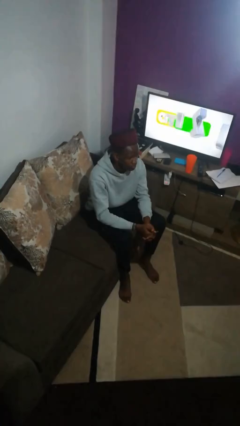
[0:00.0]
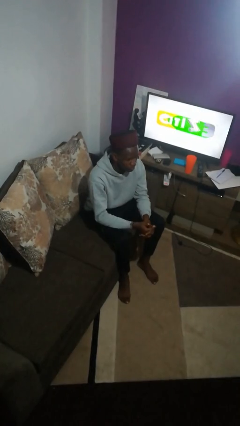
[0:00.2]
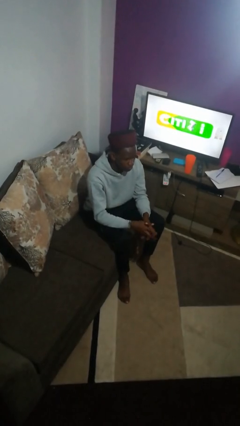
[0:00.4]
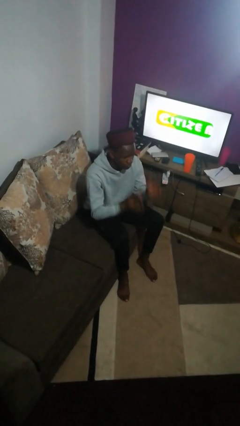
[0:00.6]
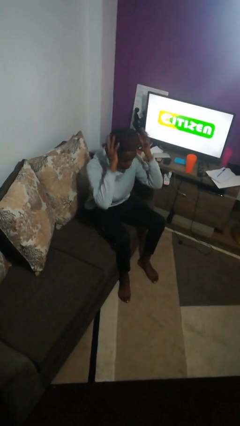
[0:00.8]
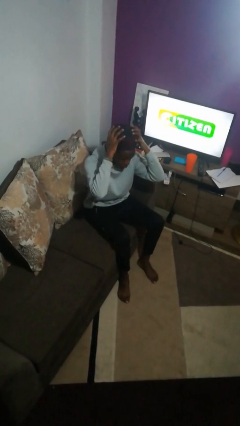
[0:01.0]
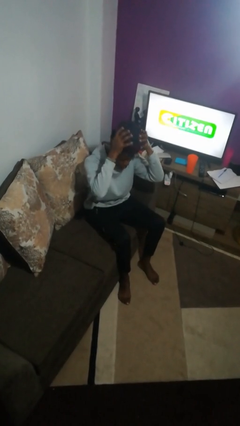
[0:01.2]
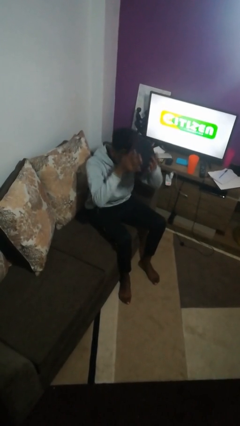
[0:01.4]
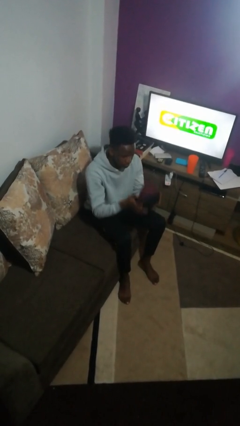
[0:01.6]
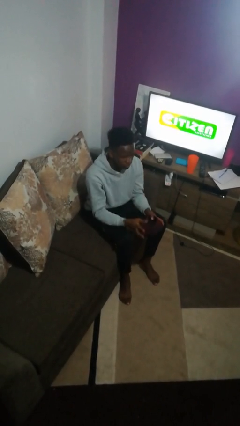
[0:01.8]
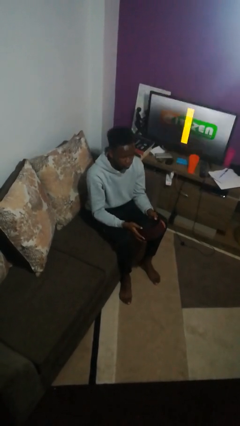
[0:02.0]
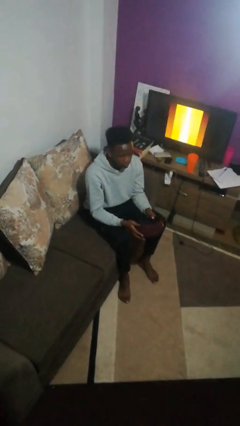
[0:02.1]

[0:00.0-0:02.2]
person takes off hat

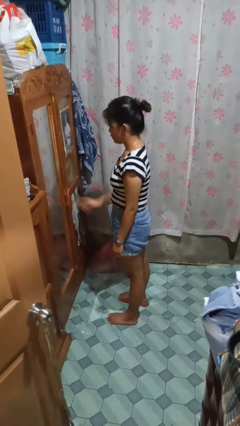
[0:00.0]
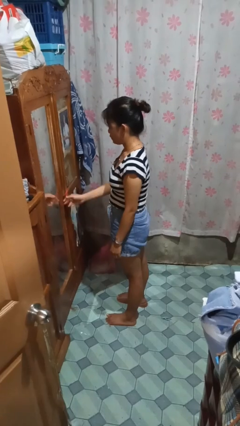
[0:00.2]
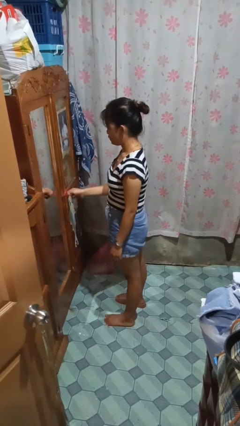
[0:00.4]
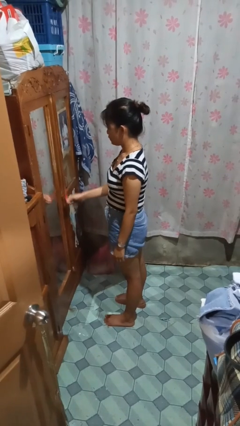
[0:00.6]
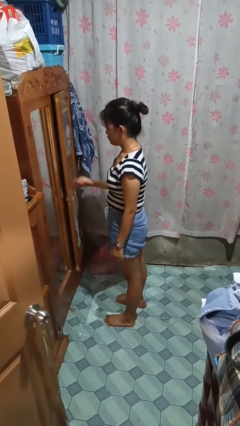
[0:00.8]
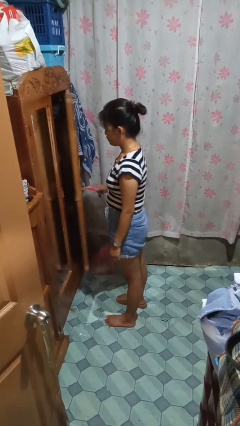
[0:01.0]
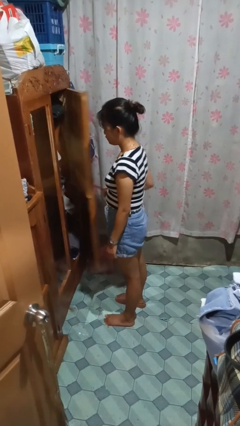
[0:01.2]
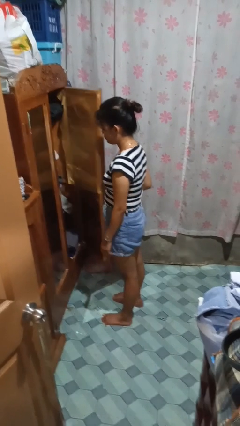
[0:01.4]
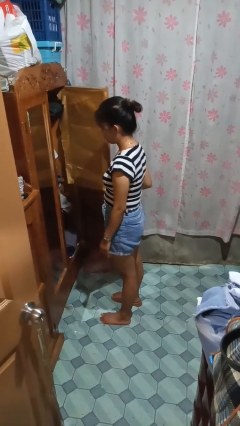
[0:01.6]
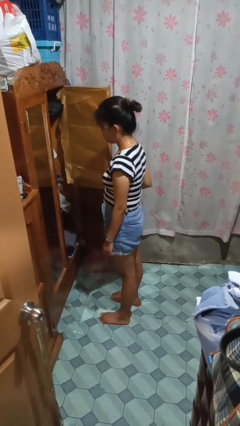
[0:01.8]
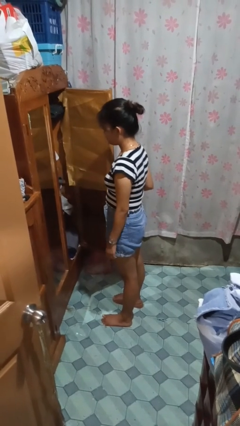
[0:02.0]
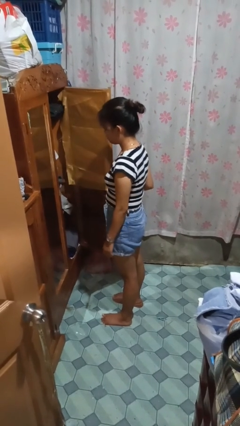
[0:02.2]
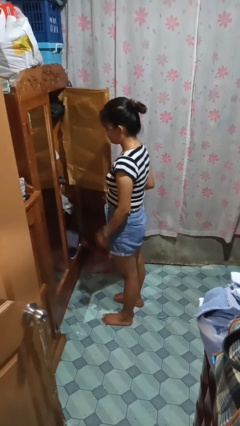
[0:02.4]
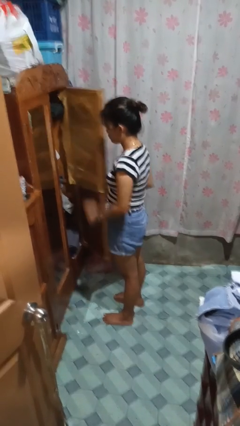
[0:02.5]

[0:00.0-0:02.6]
person opens closet door

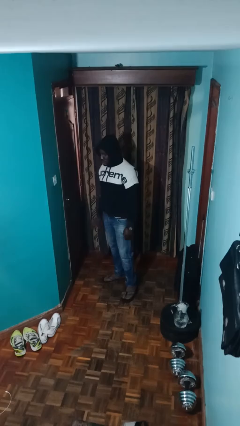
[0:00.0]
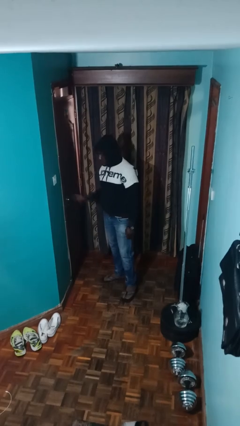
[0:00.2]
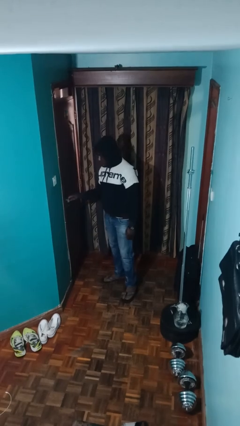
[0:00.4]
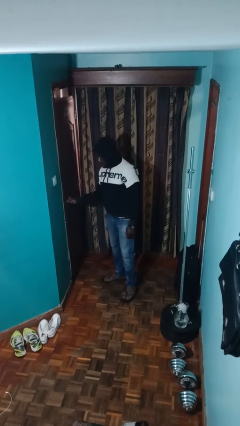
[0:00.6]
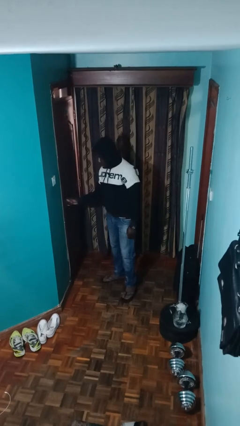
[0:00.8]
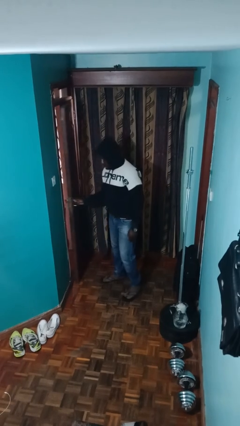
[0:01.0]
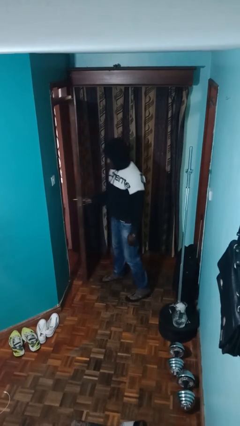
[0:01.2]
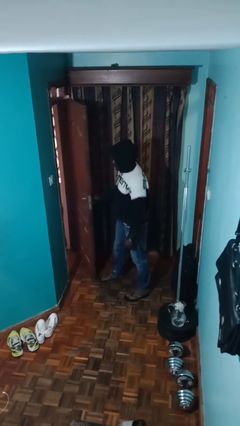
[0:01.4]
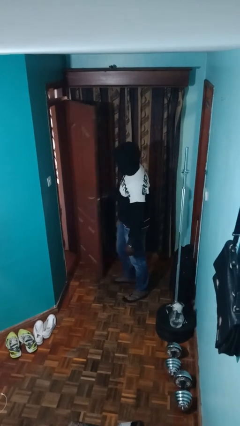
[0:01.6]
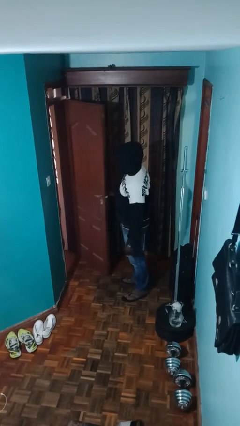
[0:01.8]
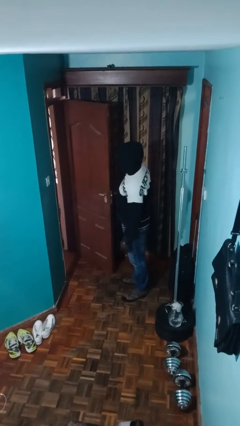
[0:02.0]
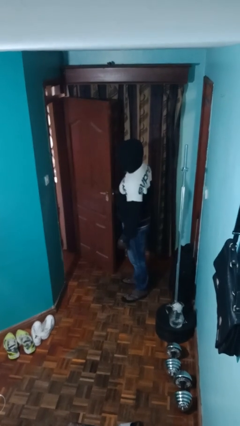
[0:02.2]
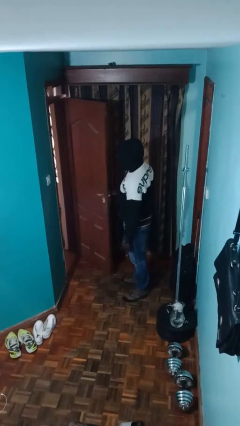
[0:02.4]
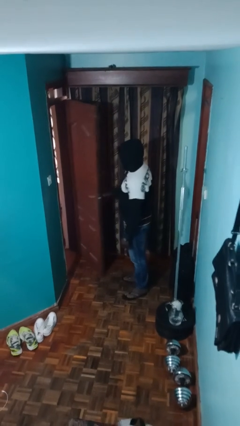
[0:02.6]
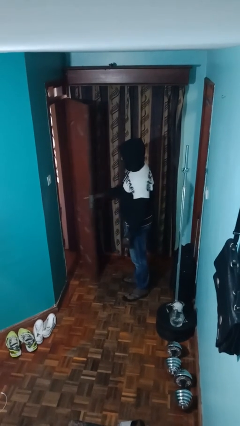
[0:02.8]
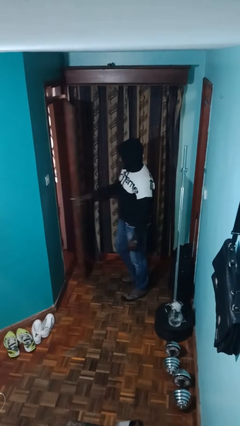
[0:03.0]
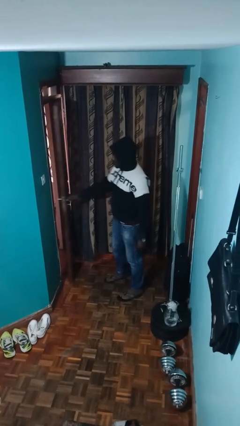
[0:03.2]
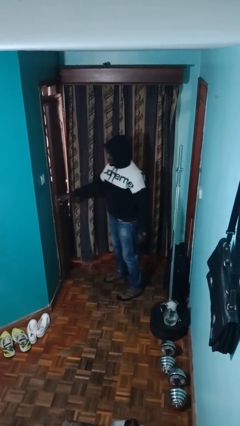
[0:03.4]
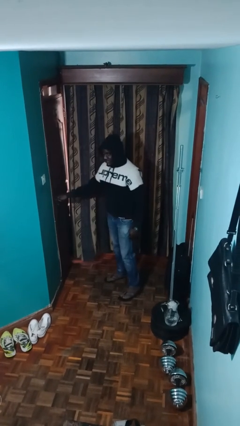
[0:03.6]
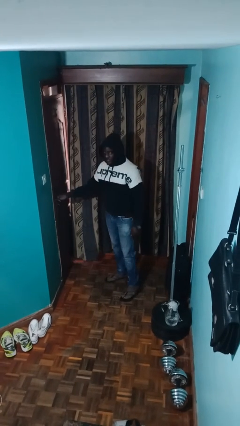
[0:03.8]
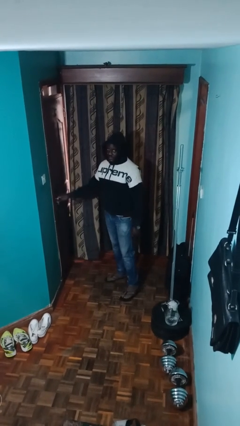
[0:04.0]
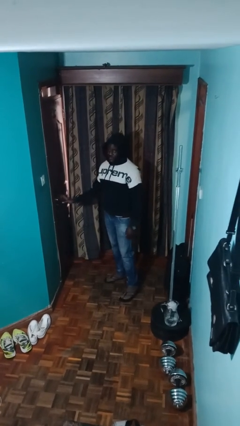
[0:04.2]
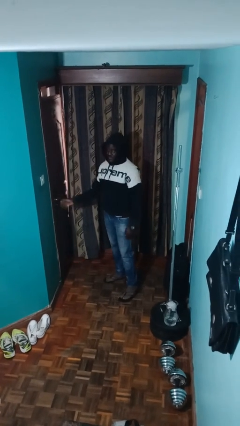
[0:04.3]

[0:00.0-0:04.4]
person unlocks door with keys

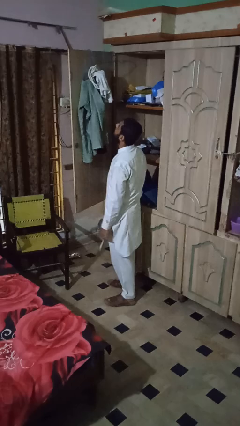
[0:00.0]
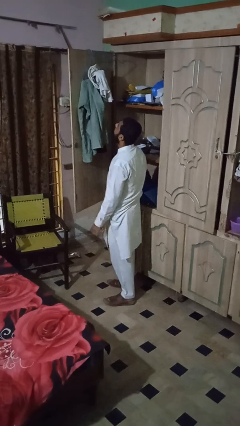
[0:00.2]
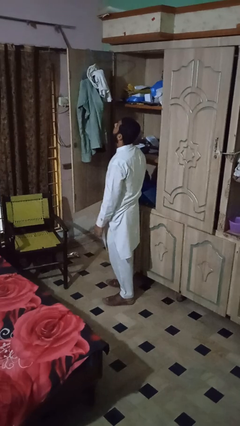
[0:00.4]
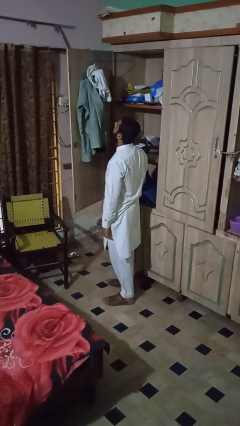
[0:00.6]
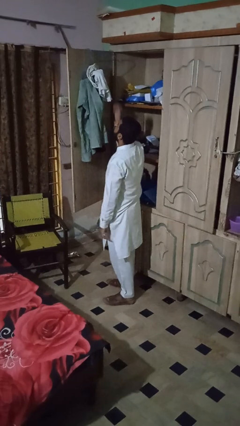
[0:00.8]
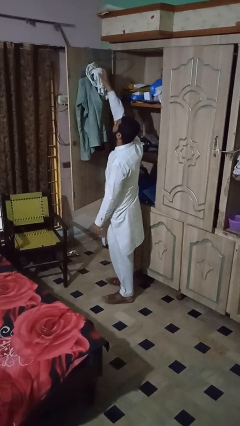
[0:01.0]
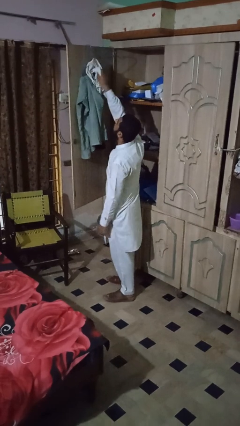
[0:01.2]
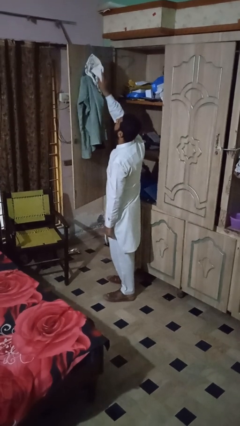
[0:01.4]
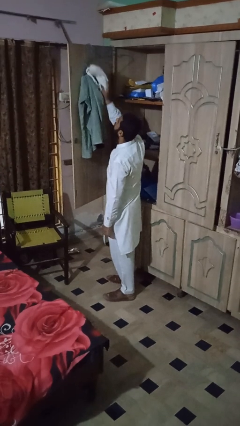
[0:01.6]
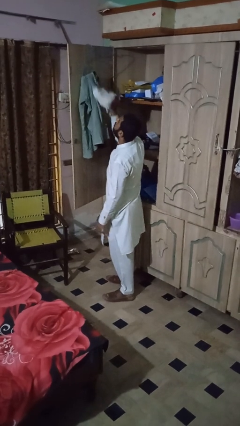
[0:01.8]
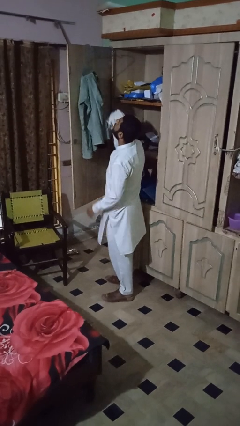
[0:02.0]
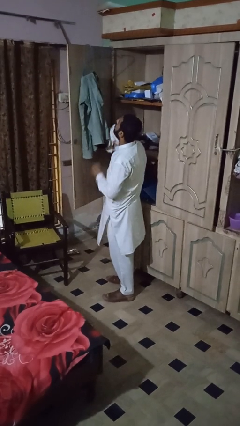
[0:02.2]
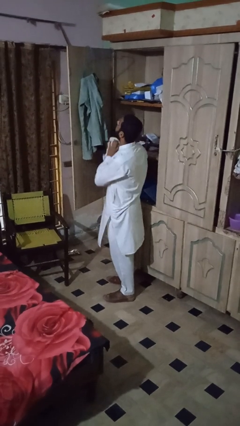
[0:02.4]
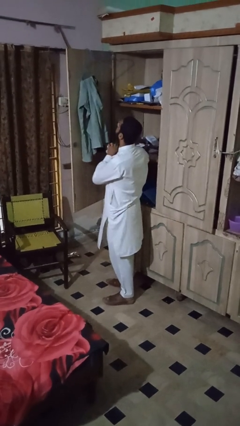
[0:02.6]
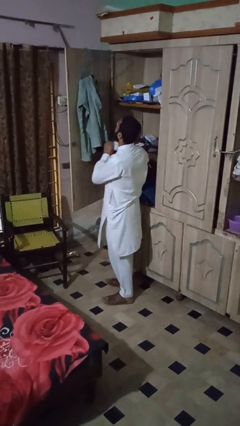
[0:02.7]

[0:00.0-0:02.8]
person takes clothes from closet

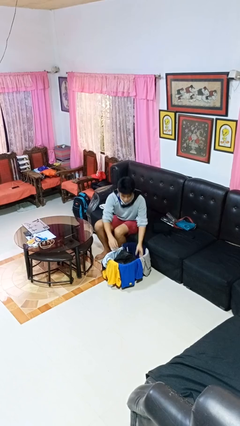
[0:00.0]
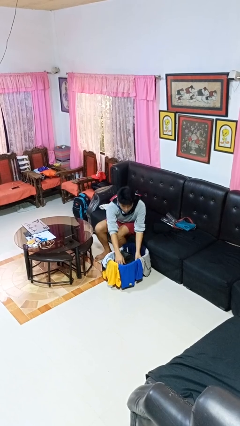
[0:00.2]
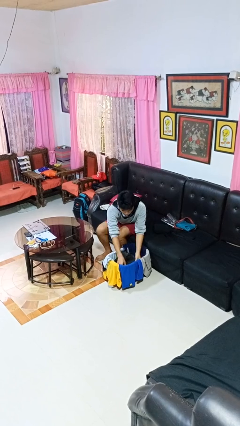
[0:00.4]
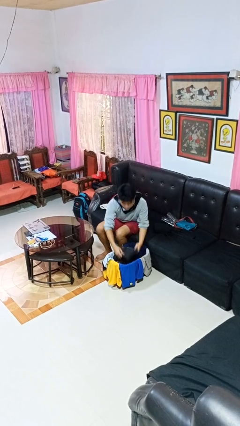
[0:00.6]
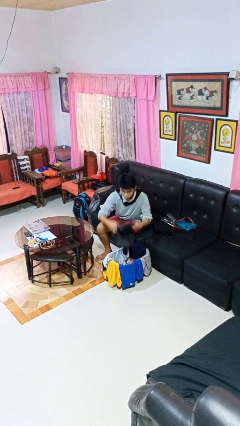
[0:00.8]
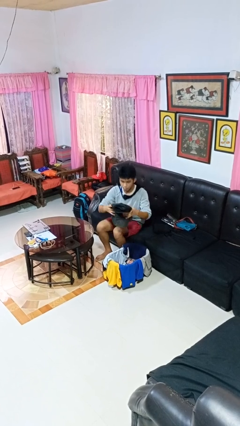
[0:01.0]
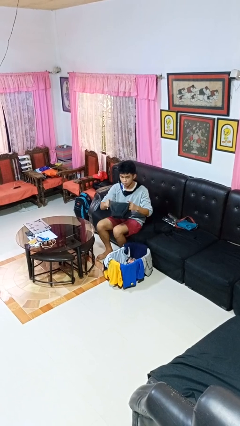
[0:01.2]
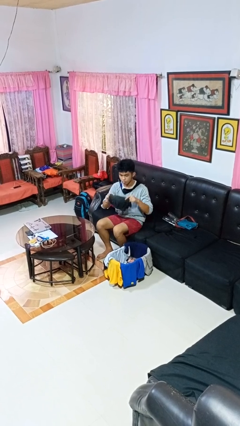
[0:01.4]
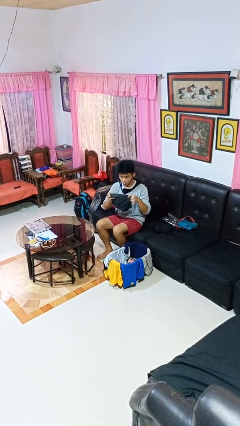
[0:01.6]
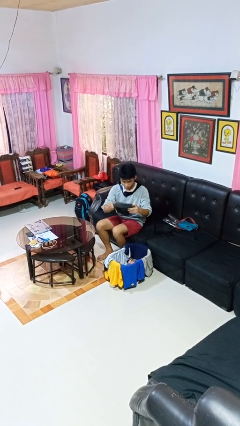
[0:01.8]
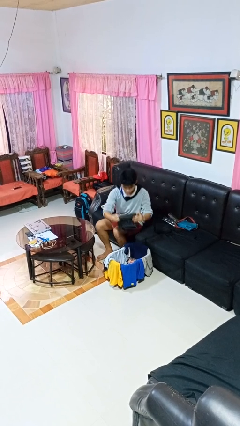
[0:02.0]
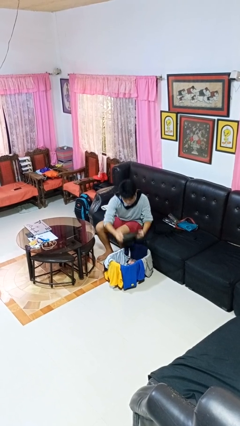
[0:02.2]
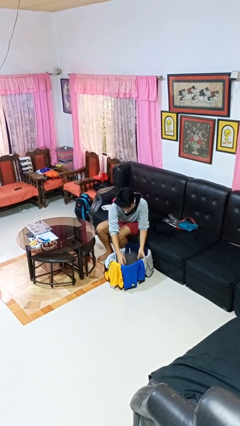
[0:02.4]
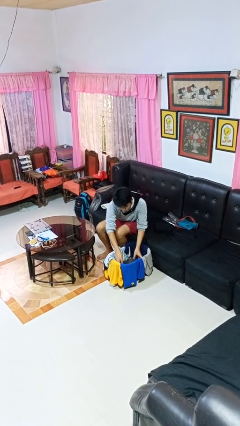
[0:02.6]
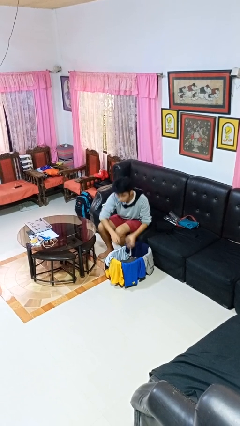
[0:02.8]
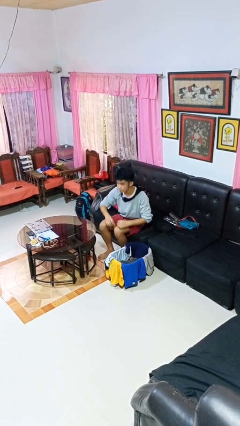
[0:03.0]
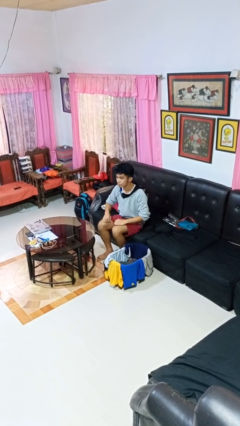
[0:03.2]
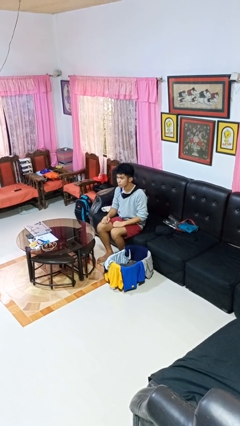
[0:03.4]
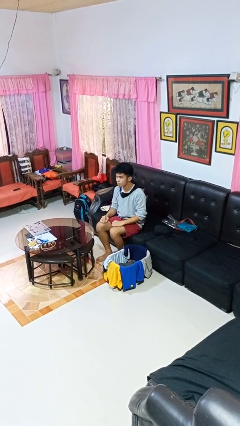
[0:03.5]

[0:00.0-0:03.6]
person folds pants

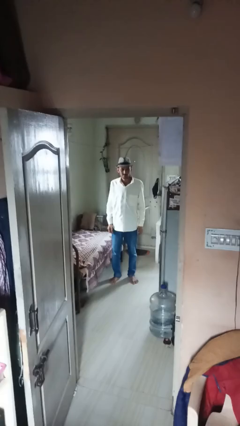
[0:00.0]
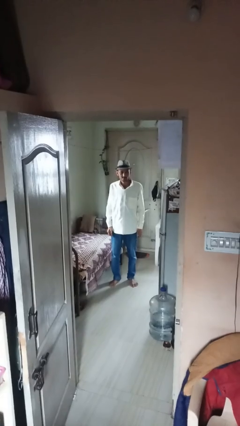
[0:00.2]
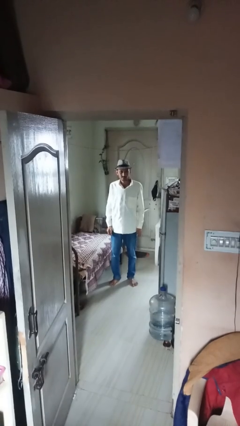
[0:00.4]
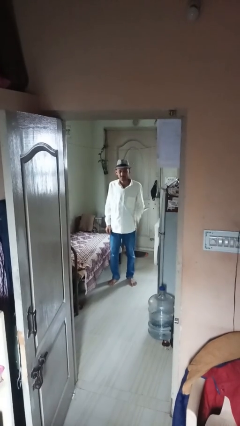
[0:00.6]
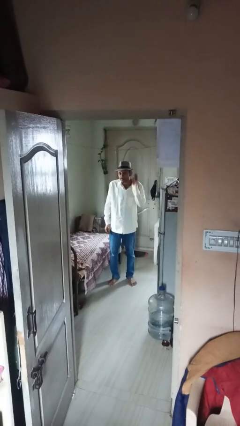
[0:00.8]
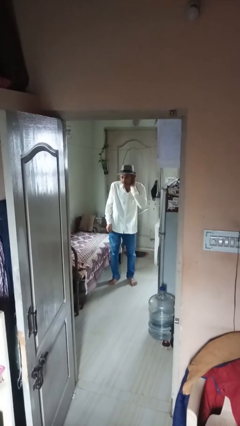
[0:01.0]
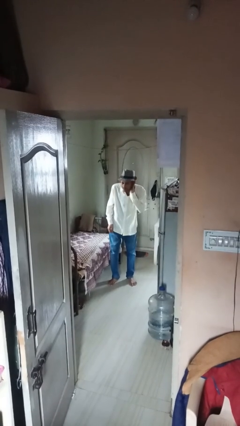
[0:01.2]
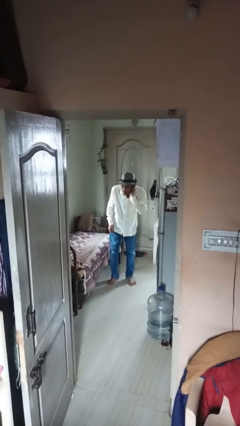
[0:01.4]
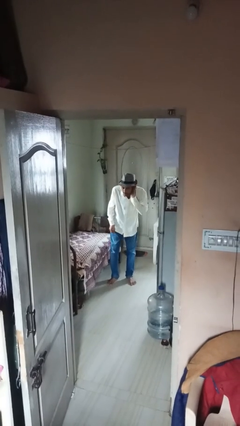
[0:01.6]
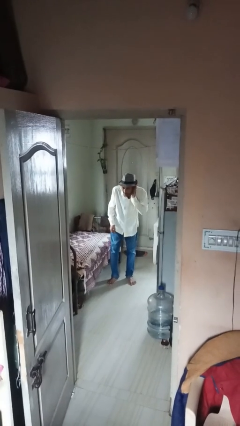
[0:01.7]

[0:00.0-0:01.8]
person gestures listen closely
